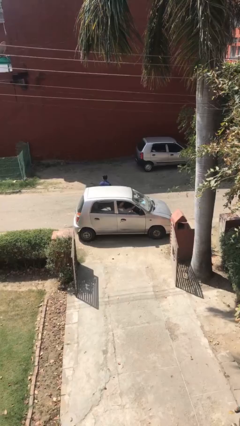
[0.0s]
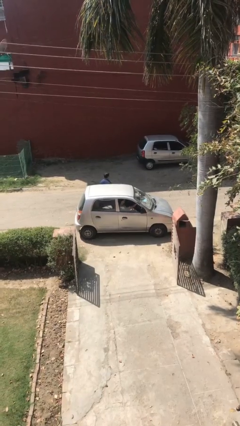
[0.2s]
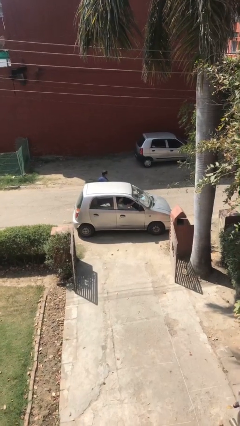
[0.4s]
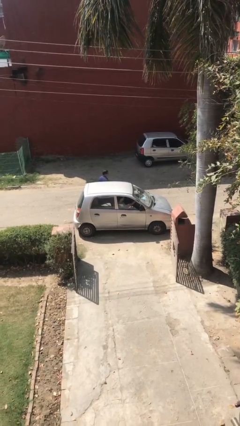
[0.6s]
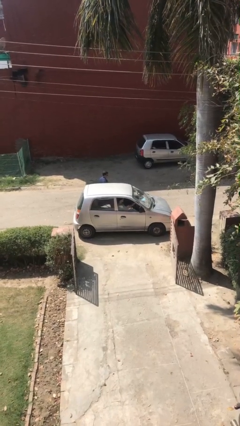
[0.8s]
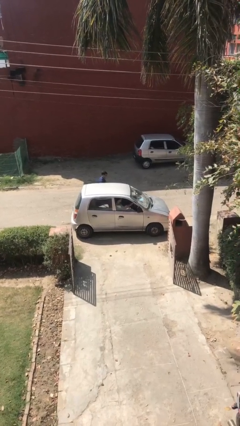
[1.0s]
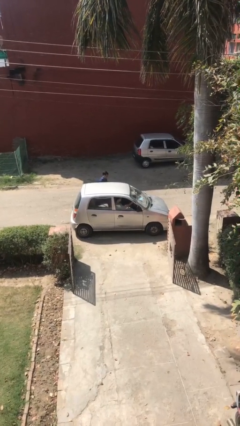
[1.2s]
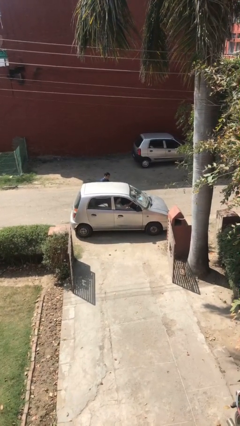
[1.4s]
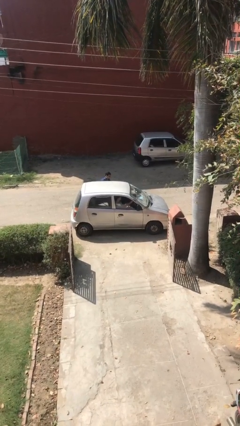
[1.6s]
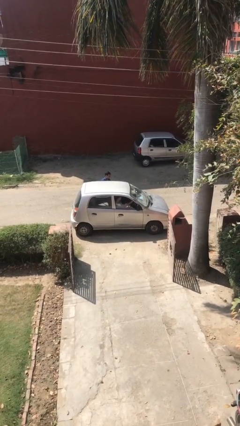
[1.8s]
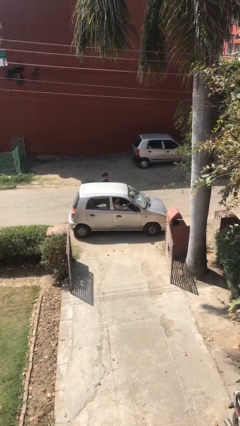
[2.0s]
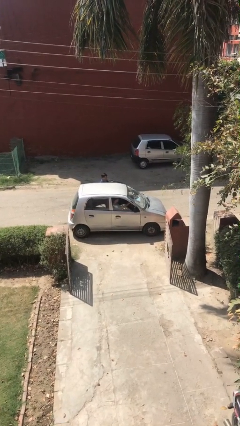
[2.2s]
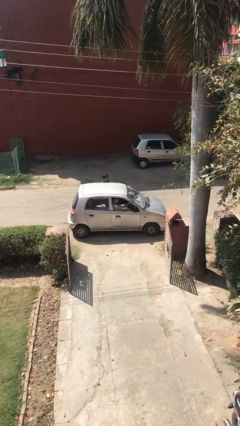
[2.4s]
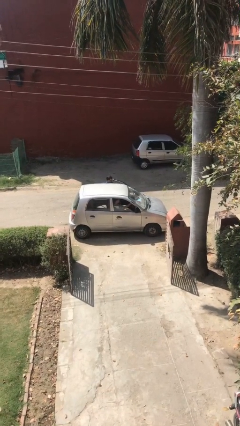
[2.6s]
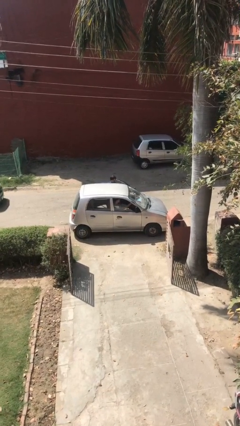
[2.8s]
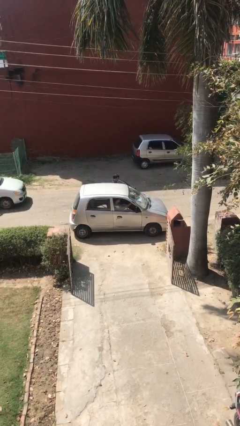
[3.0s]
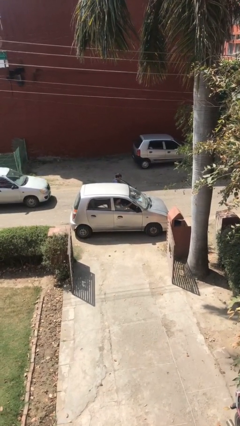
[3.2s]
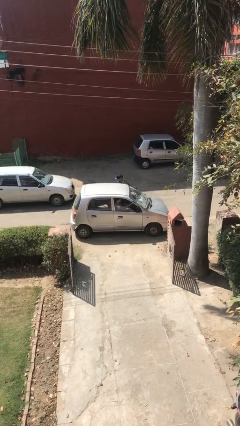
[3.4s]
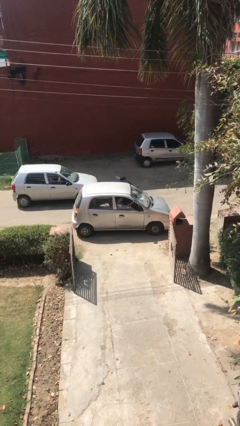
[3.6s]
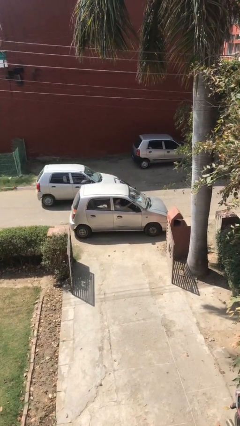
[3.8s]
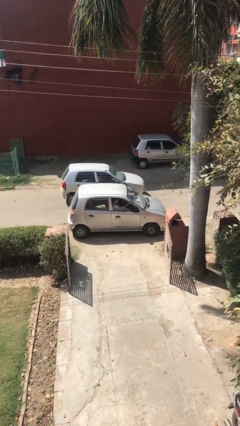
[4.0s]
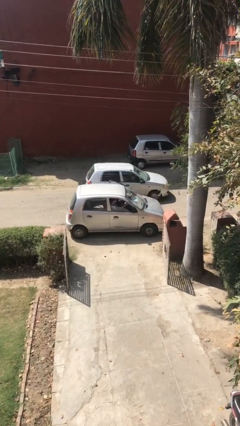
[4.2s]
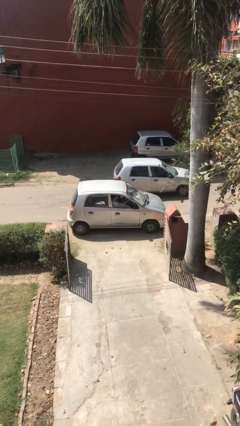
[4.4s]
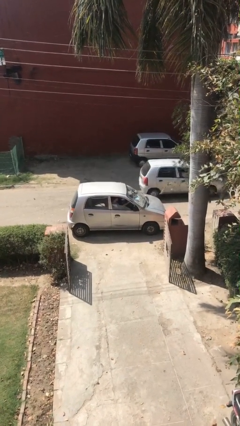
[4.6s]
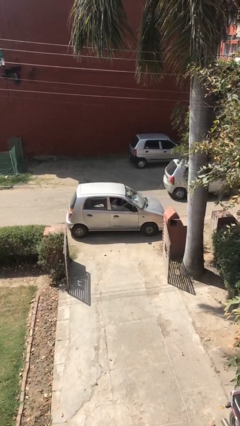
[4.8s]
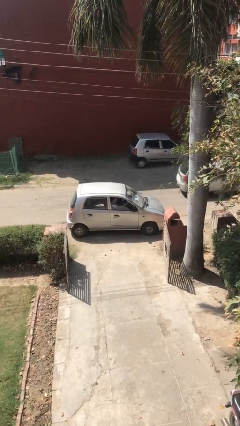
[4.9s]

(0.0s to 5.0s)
car picks up person

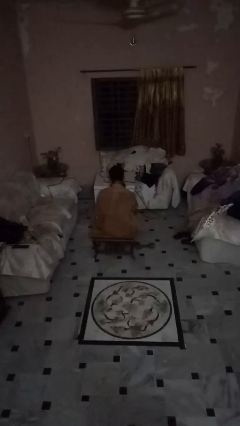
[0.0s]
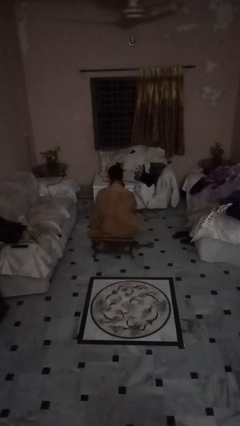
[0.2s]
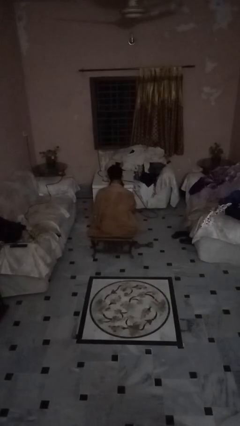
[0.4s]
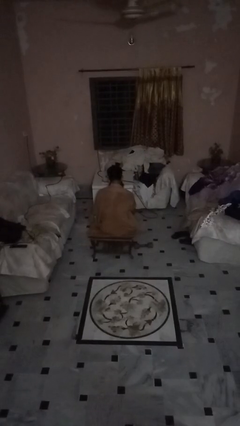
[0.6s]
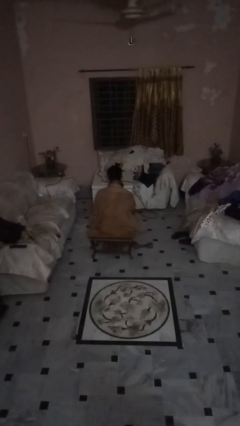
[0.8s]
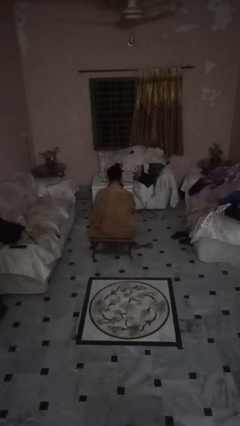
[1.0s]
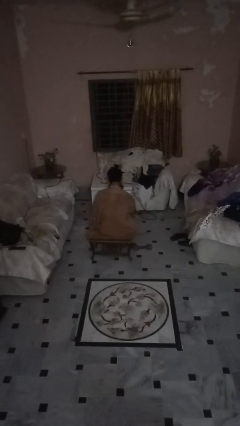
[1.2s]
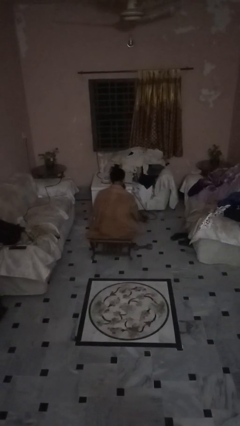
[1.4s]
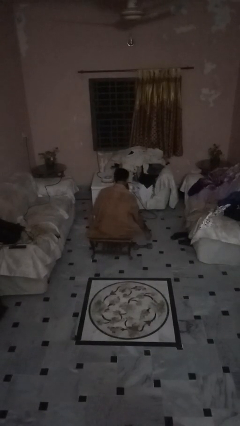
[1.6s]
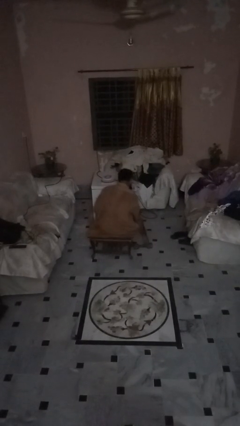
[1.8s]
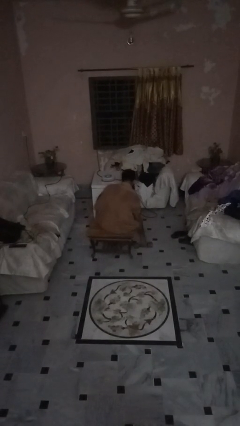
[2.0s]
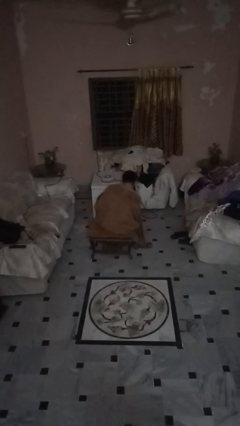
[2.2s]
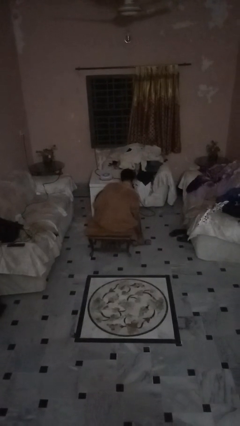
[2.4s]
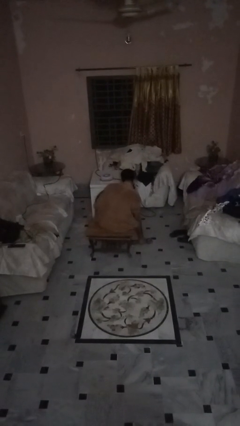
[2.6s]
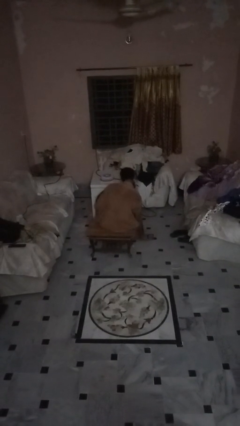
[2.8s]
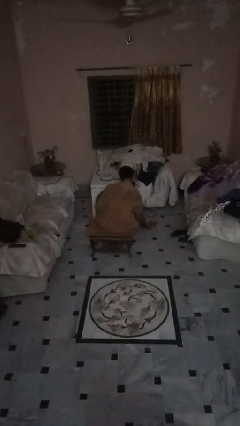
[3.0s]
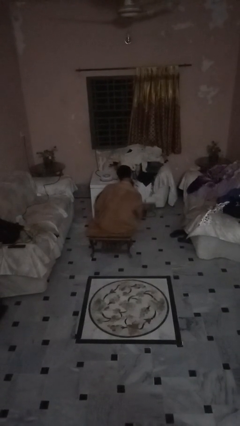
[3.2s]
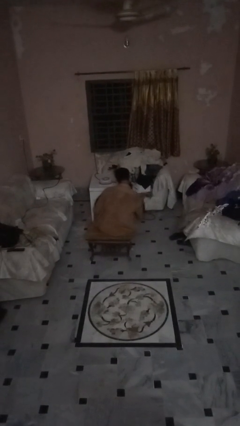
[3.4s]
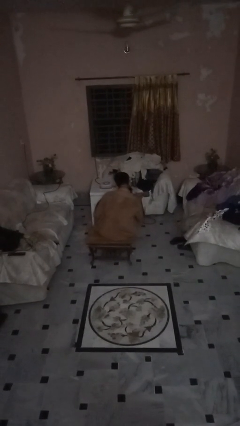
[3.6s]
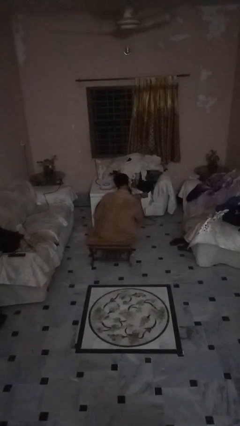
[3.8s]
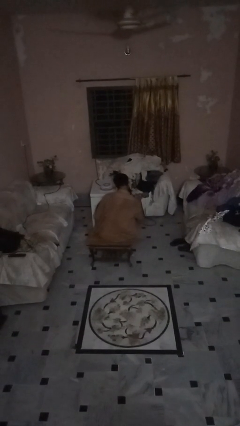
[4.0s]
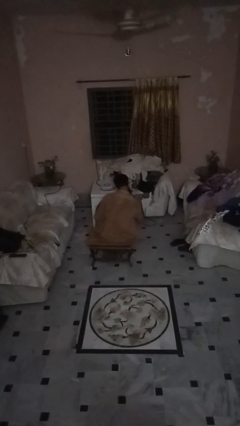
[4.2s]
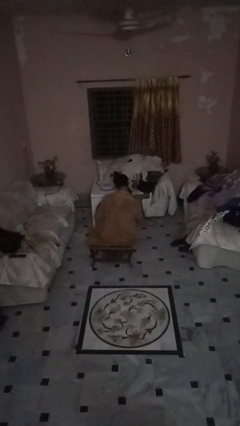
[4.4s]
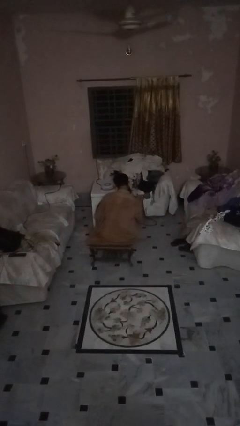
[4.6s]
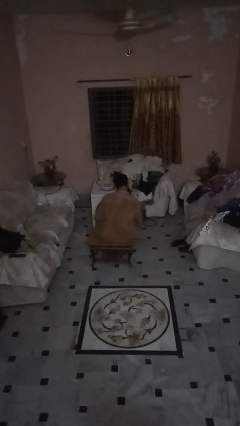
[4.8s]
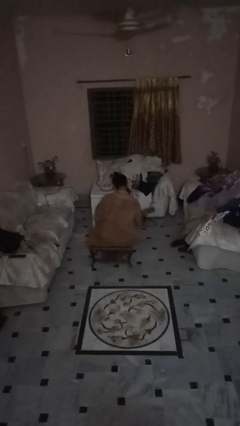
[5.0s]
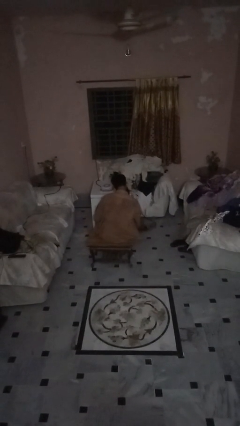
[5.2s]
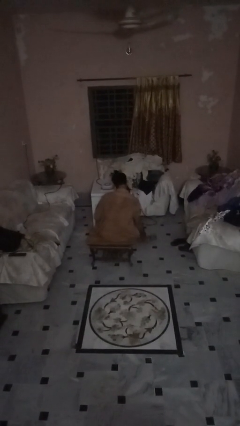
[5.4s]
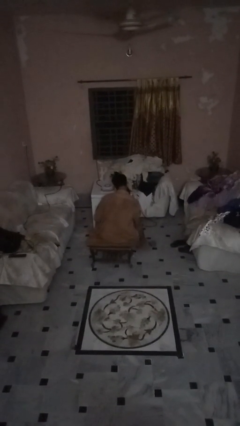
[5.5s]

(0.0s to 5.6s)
person lifts dumbbells

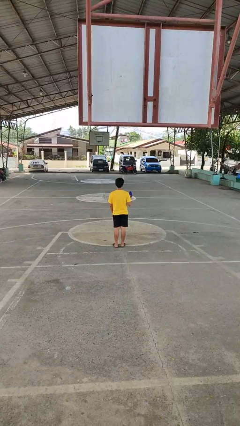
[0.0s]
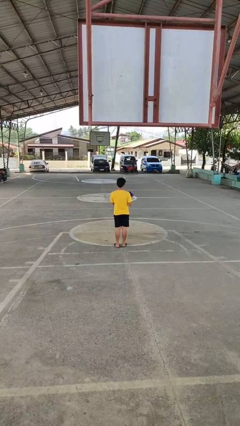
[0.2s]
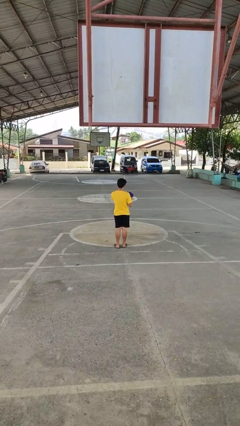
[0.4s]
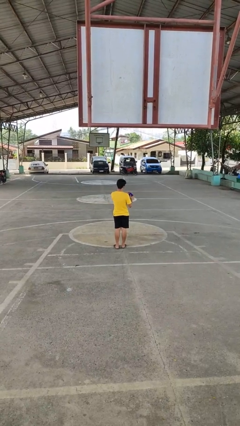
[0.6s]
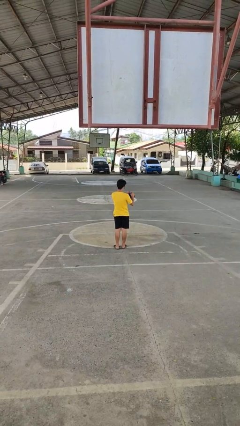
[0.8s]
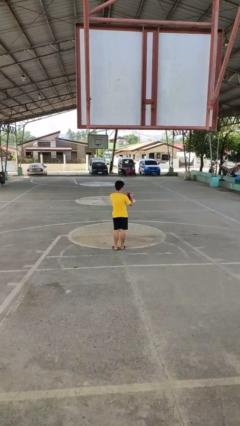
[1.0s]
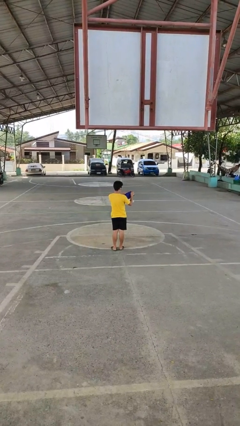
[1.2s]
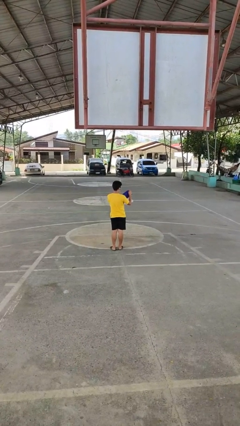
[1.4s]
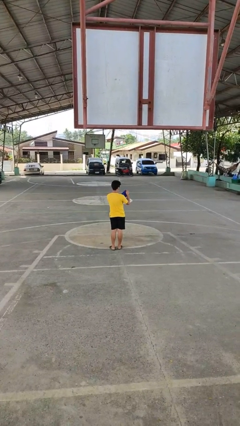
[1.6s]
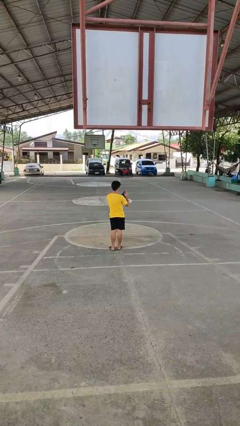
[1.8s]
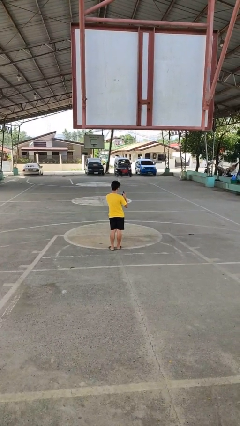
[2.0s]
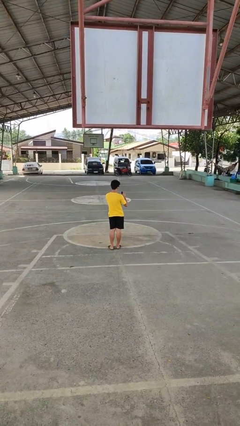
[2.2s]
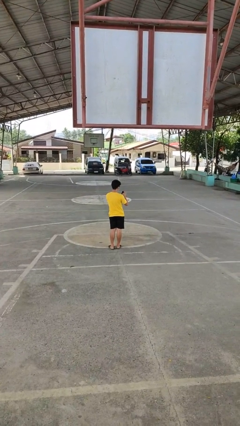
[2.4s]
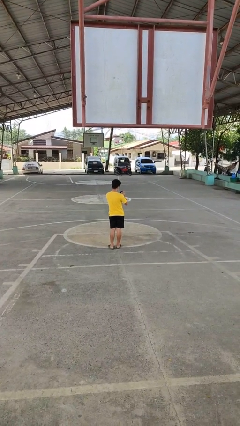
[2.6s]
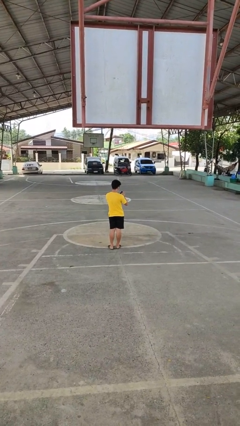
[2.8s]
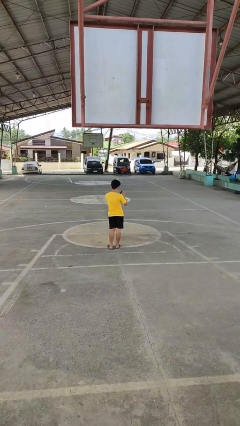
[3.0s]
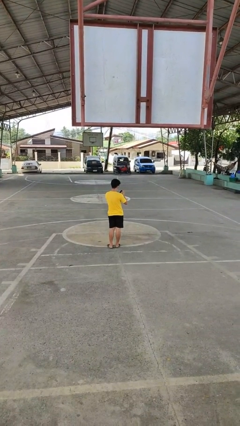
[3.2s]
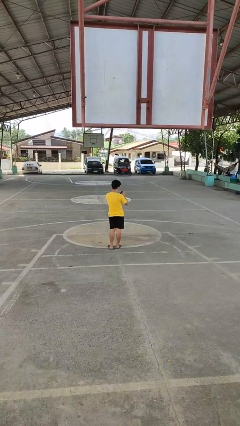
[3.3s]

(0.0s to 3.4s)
person searches in purse

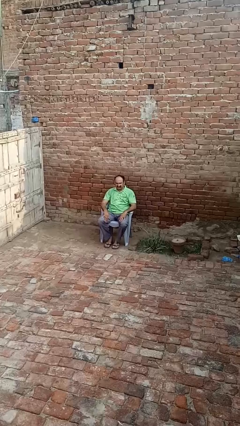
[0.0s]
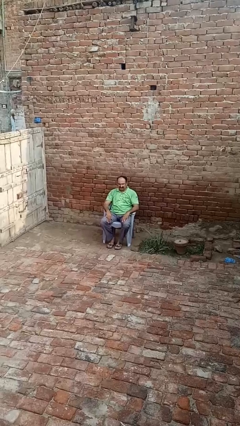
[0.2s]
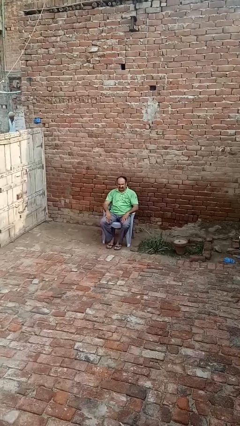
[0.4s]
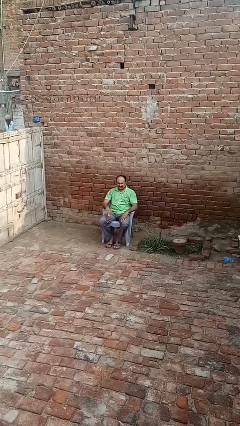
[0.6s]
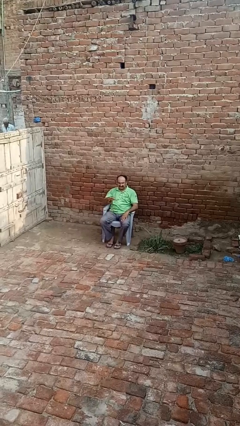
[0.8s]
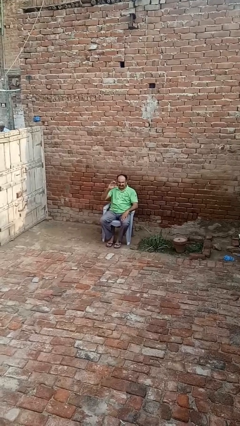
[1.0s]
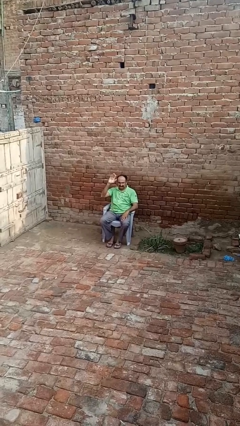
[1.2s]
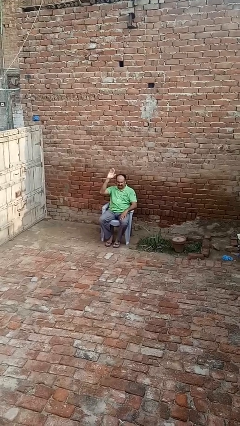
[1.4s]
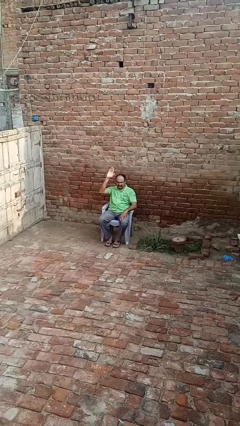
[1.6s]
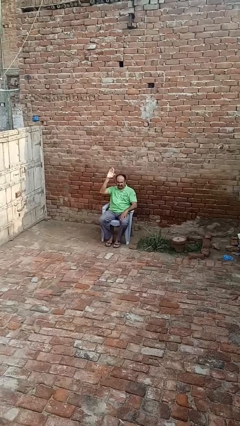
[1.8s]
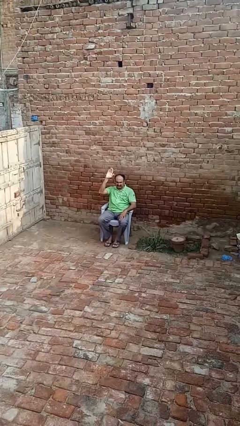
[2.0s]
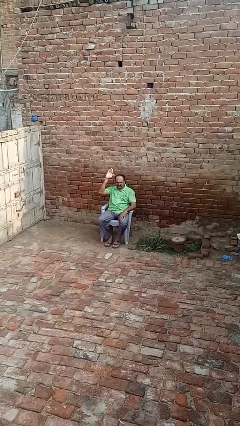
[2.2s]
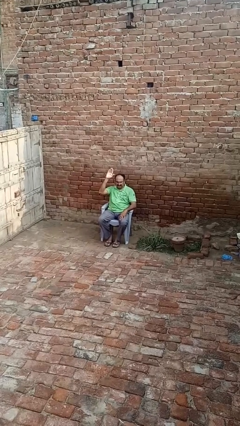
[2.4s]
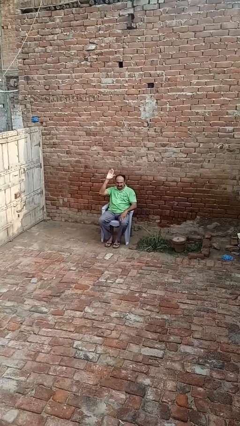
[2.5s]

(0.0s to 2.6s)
person gestures raise hand

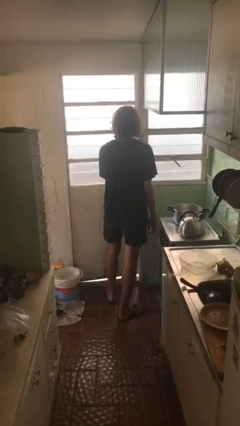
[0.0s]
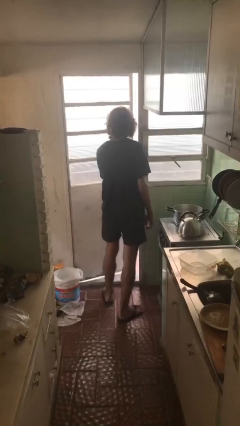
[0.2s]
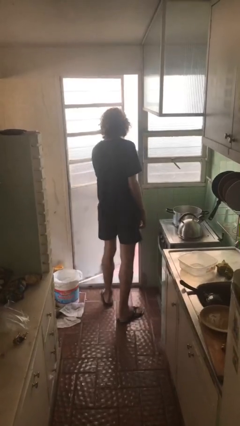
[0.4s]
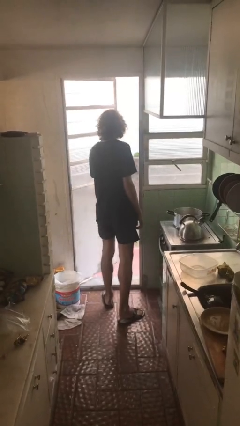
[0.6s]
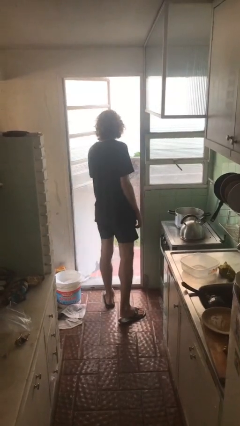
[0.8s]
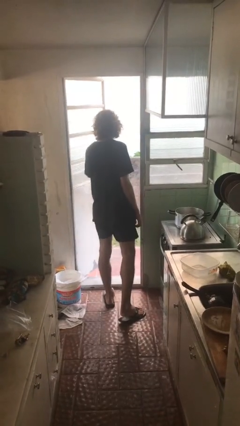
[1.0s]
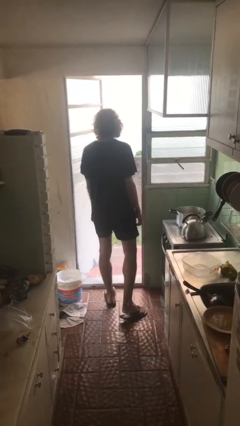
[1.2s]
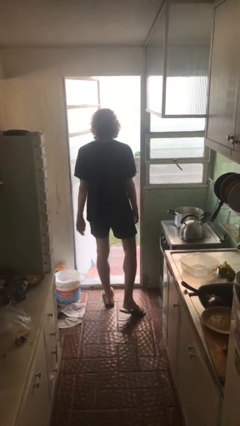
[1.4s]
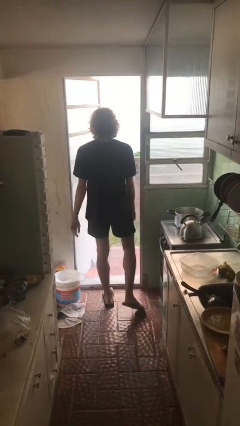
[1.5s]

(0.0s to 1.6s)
person opens facility door
